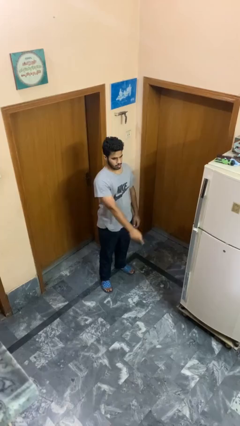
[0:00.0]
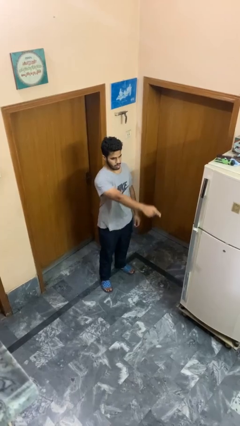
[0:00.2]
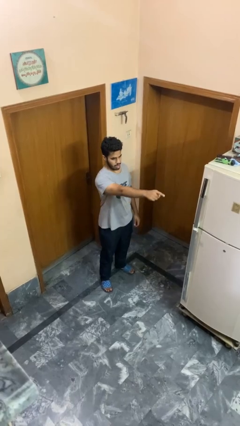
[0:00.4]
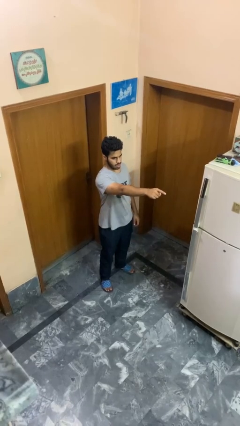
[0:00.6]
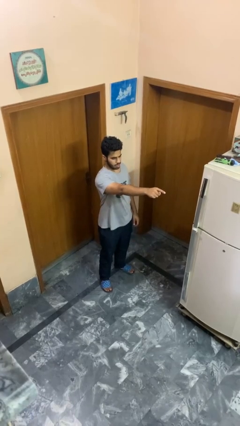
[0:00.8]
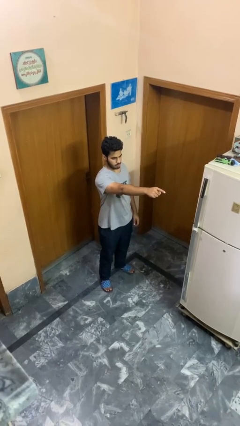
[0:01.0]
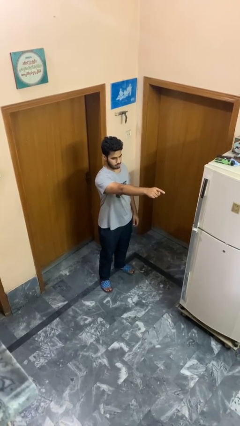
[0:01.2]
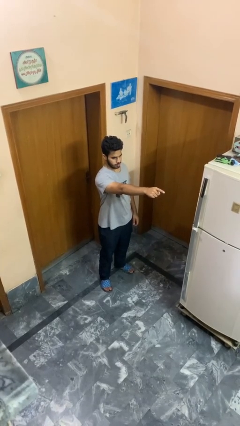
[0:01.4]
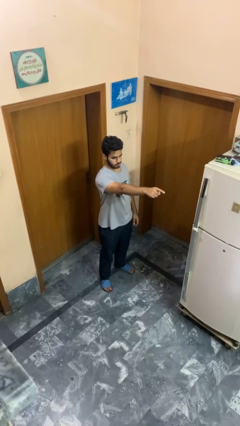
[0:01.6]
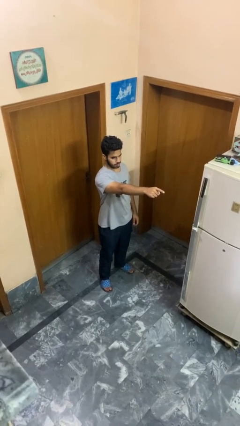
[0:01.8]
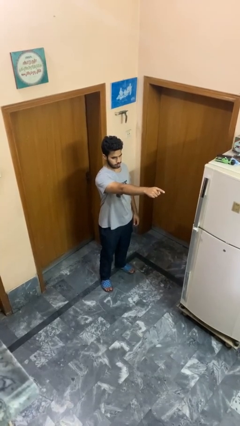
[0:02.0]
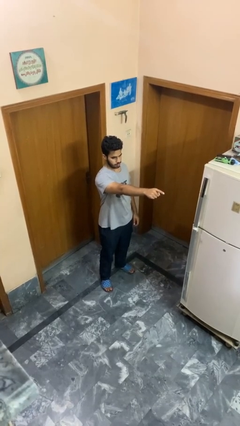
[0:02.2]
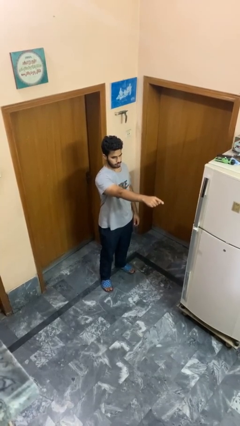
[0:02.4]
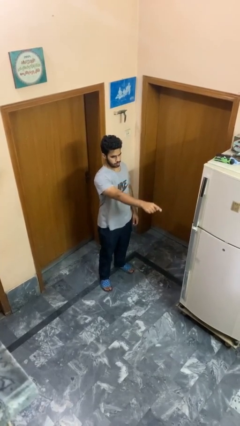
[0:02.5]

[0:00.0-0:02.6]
person points at person

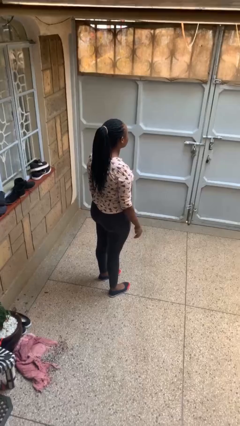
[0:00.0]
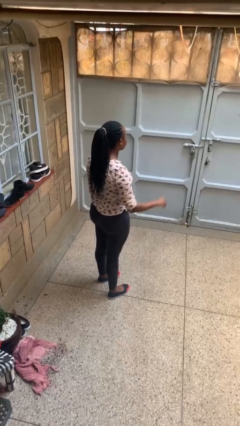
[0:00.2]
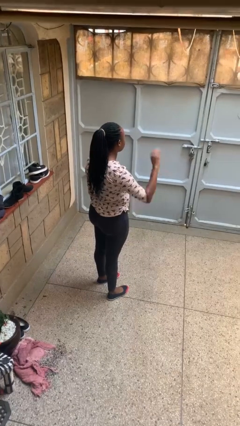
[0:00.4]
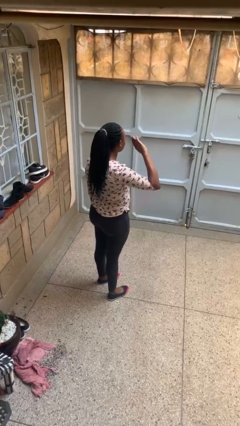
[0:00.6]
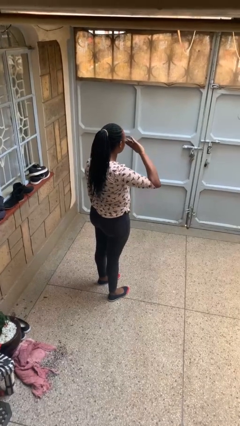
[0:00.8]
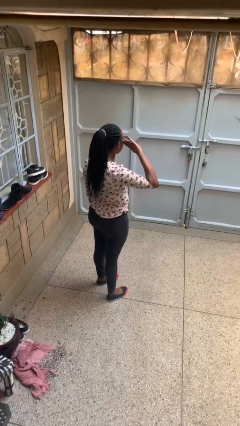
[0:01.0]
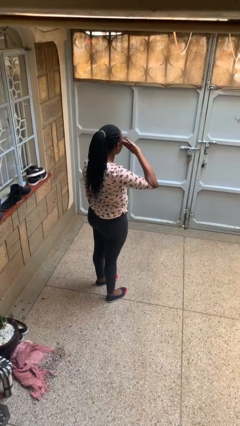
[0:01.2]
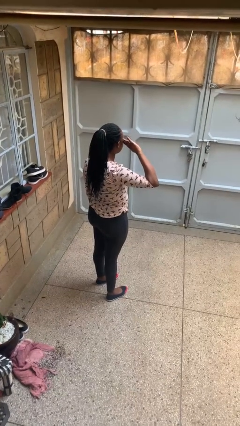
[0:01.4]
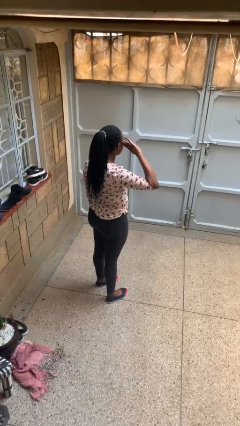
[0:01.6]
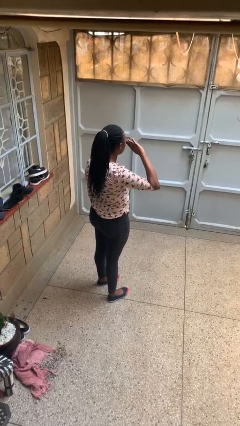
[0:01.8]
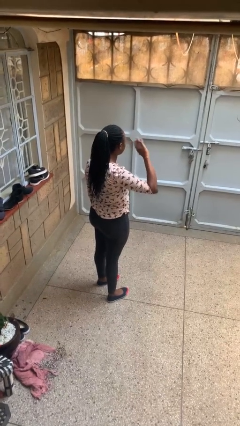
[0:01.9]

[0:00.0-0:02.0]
person salutes

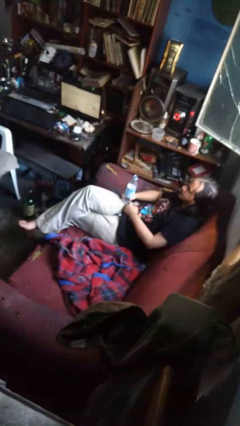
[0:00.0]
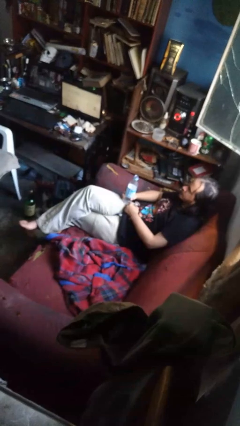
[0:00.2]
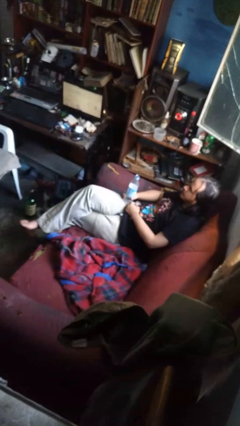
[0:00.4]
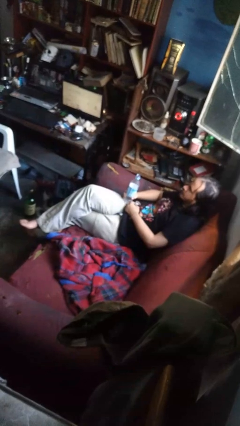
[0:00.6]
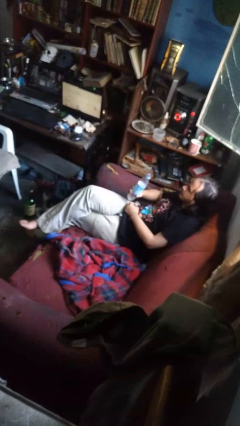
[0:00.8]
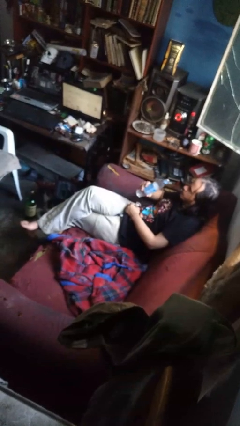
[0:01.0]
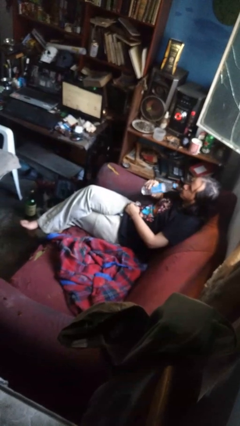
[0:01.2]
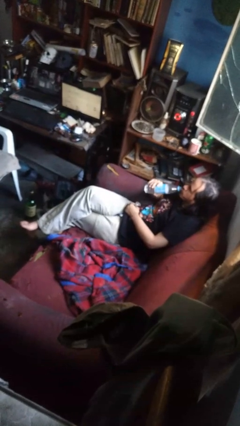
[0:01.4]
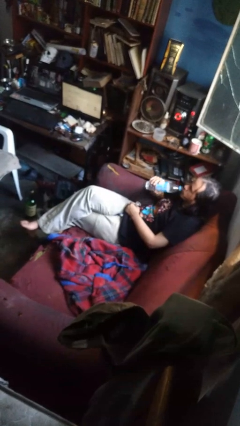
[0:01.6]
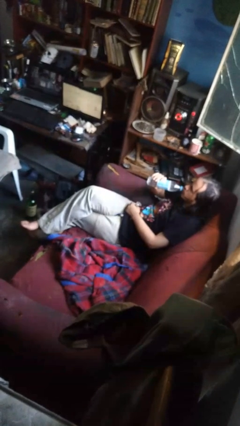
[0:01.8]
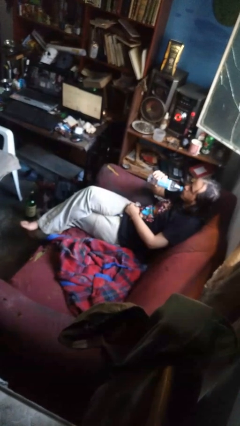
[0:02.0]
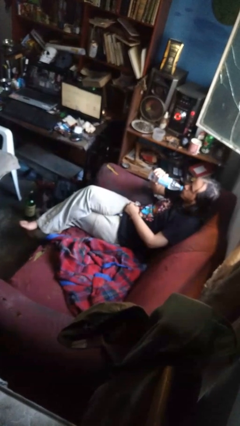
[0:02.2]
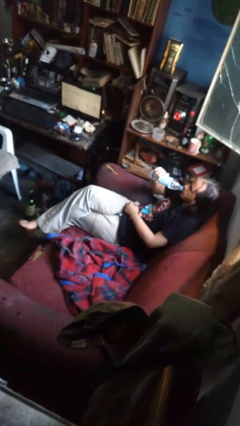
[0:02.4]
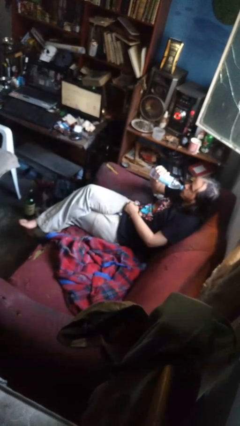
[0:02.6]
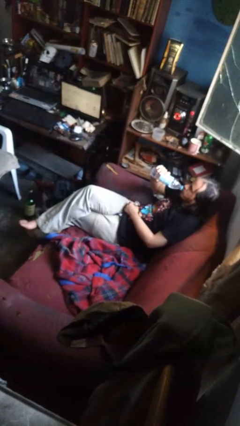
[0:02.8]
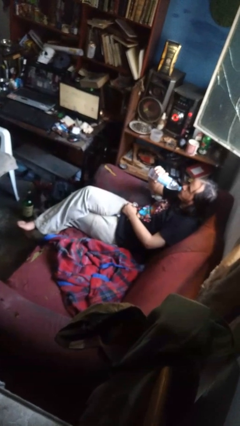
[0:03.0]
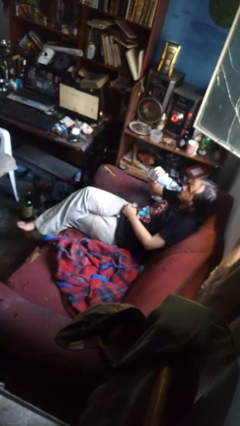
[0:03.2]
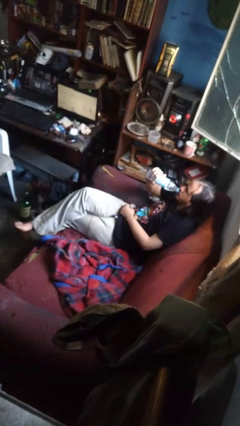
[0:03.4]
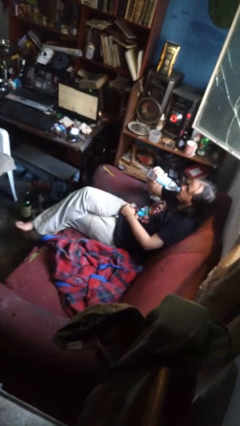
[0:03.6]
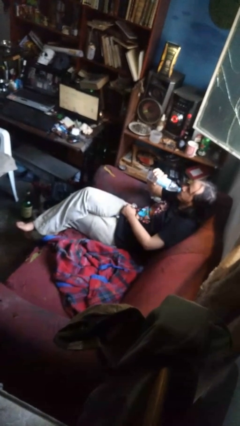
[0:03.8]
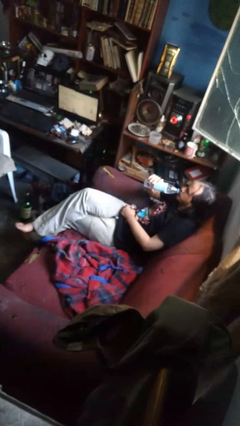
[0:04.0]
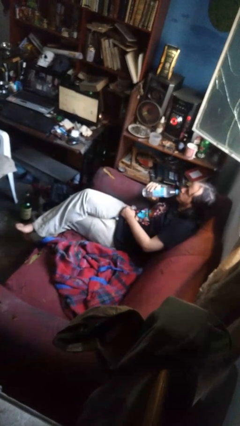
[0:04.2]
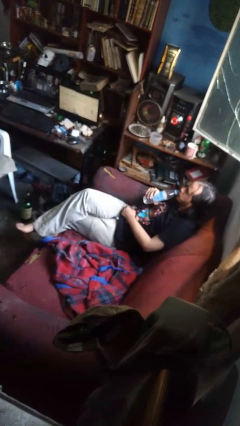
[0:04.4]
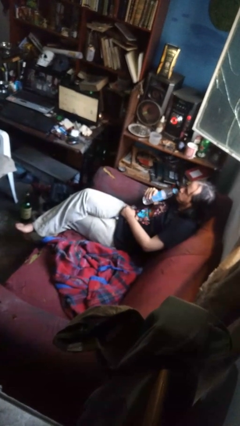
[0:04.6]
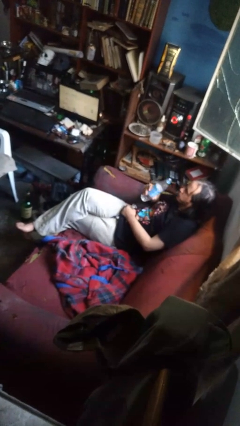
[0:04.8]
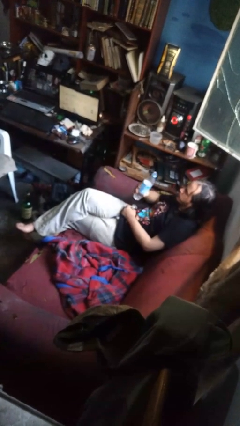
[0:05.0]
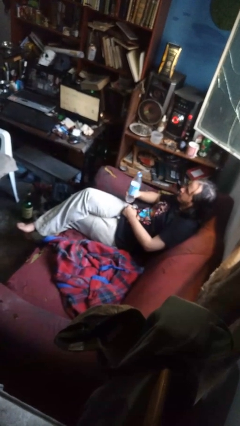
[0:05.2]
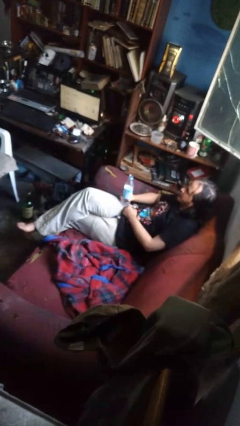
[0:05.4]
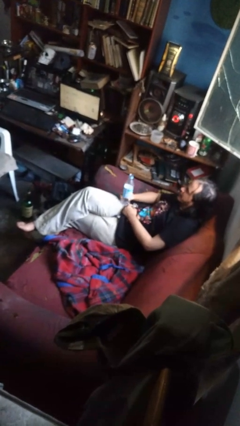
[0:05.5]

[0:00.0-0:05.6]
person drinks from bottle

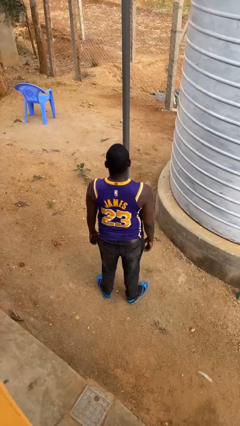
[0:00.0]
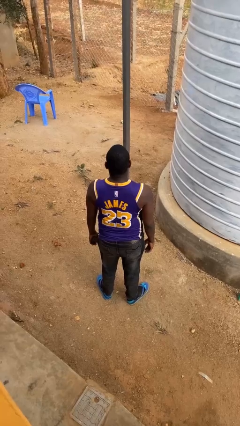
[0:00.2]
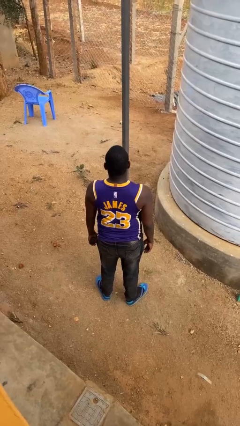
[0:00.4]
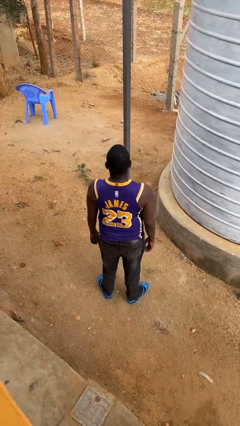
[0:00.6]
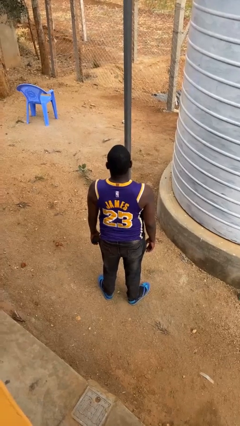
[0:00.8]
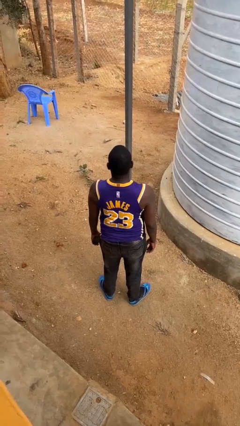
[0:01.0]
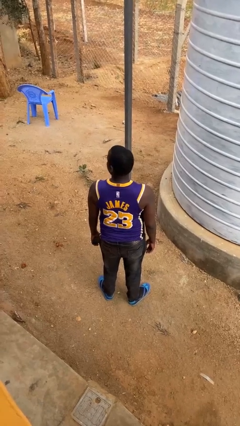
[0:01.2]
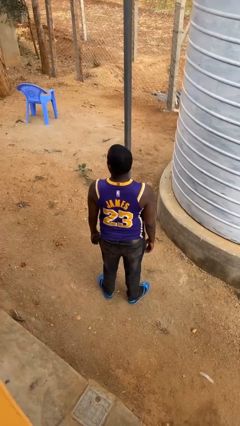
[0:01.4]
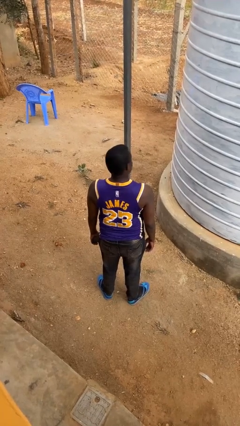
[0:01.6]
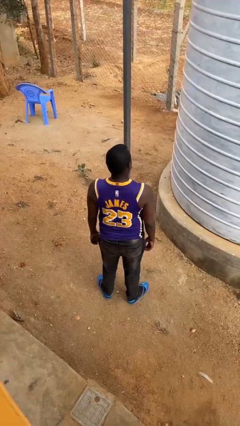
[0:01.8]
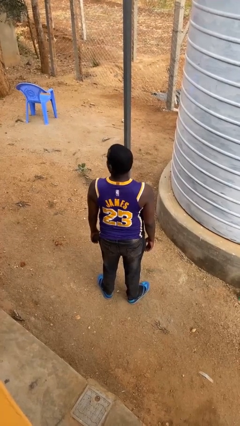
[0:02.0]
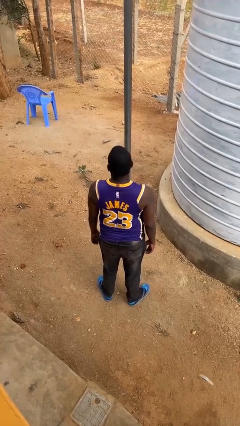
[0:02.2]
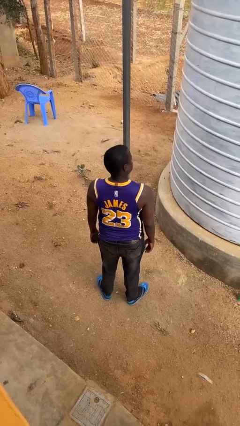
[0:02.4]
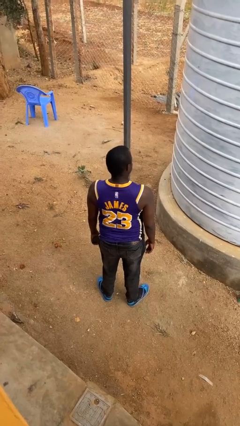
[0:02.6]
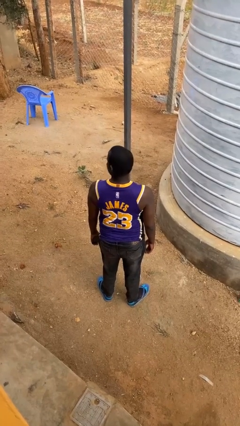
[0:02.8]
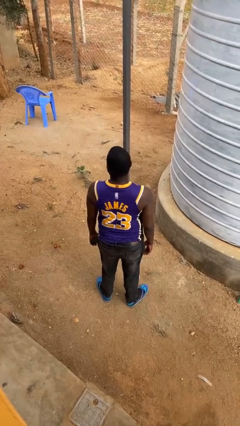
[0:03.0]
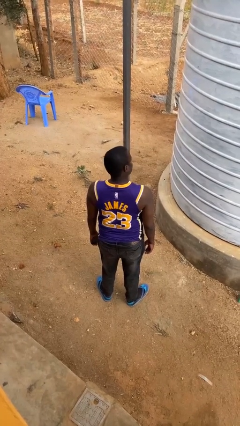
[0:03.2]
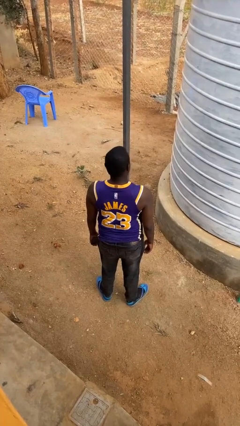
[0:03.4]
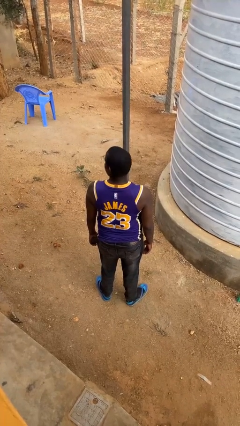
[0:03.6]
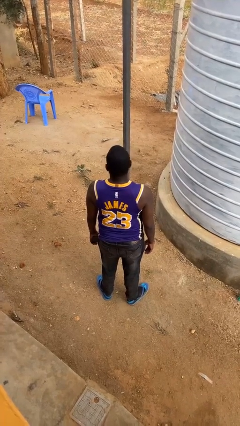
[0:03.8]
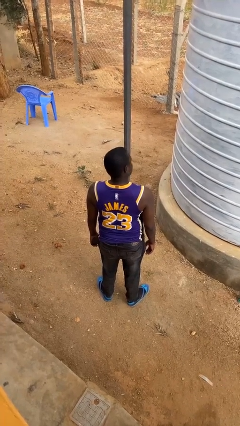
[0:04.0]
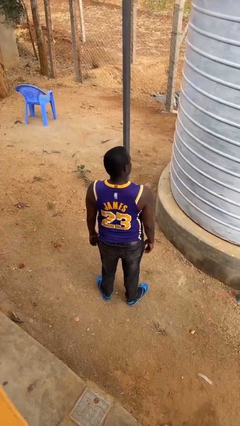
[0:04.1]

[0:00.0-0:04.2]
person shakes head

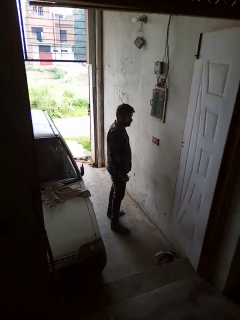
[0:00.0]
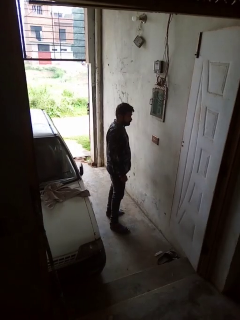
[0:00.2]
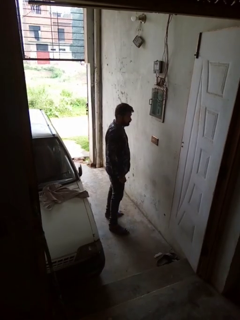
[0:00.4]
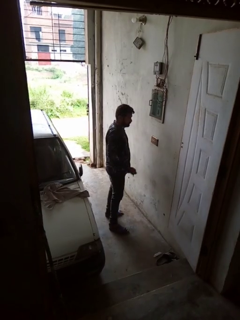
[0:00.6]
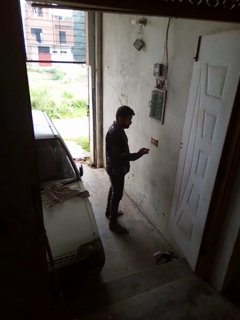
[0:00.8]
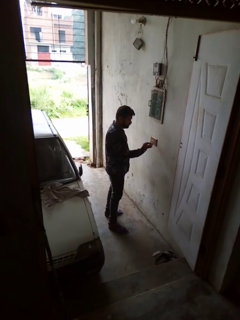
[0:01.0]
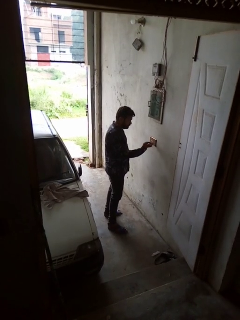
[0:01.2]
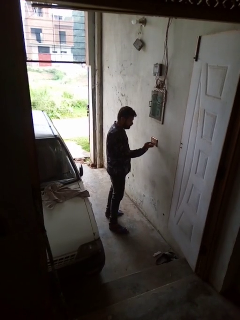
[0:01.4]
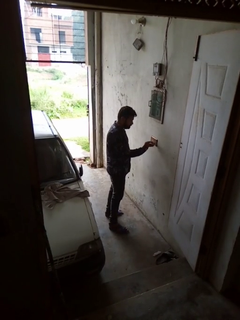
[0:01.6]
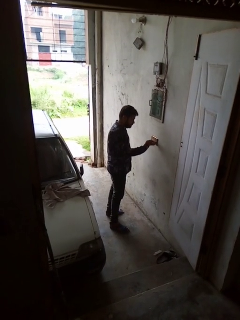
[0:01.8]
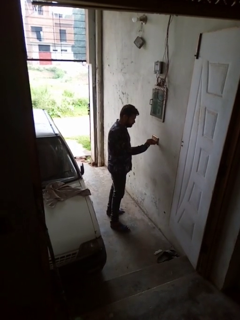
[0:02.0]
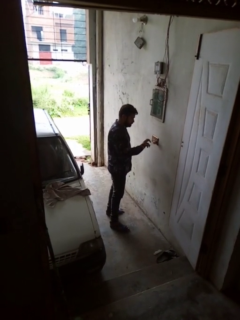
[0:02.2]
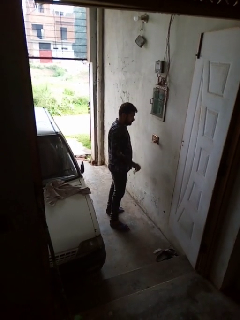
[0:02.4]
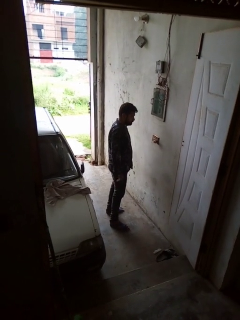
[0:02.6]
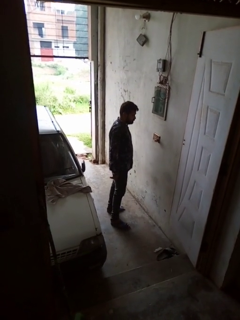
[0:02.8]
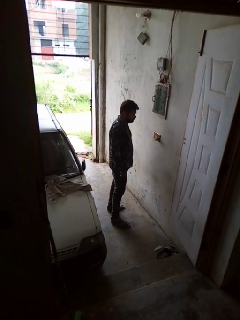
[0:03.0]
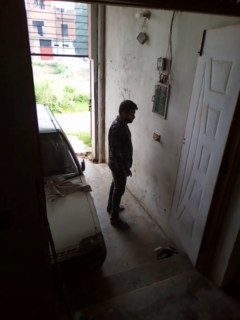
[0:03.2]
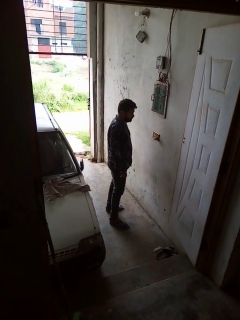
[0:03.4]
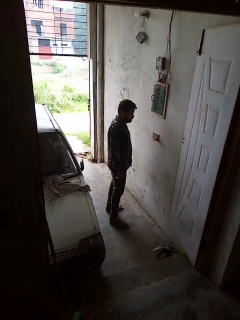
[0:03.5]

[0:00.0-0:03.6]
person plugs into electrical socket

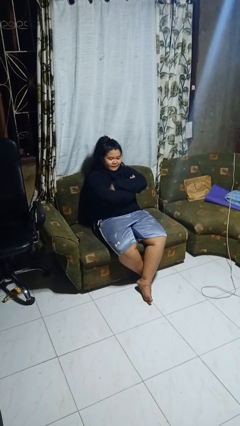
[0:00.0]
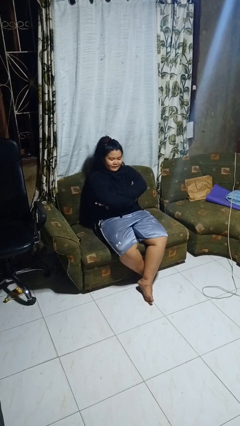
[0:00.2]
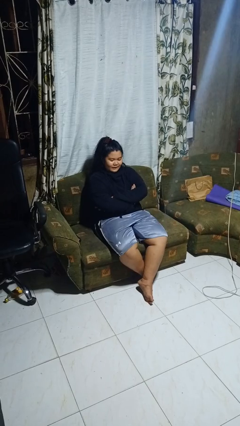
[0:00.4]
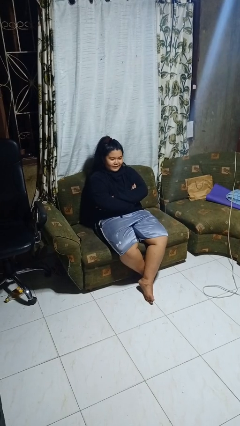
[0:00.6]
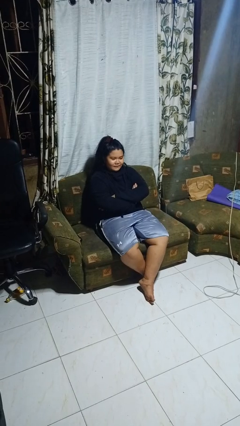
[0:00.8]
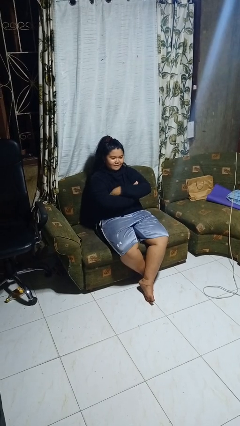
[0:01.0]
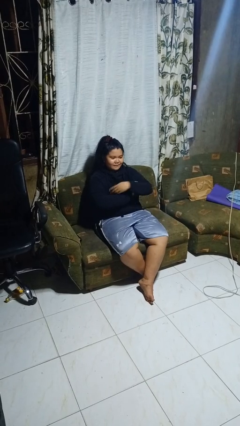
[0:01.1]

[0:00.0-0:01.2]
person crosses arms
